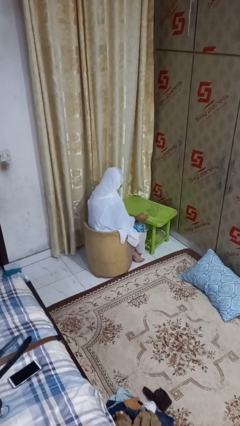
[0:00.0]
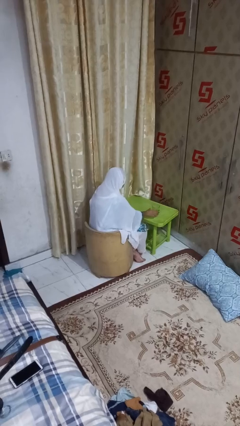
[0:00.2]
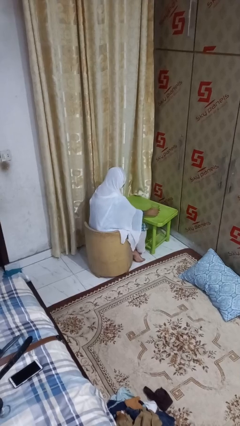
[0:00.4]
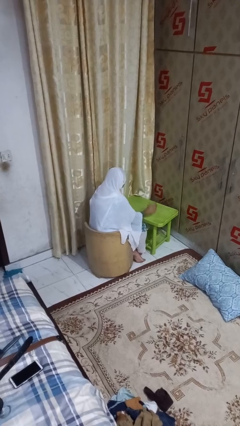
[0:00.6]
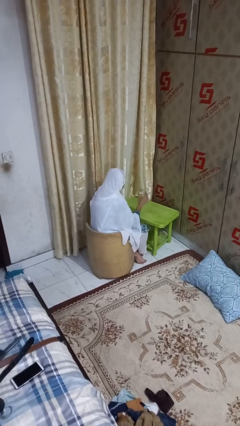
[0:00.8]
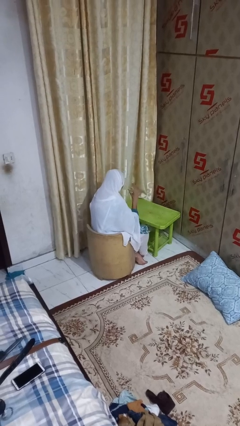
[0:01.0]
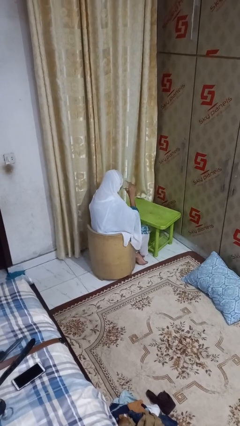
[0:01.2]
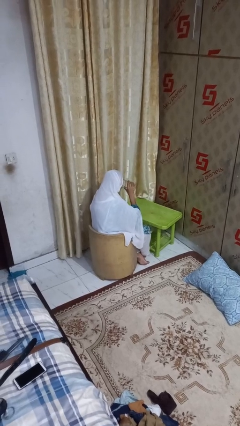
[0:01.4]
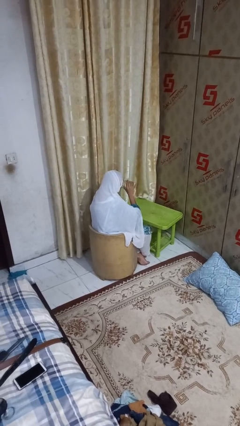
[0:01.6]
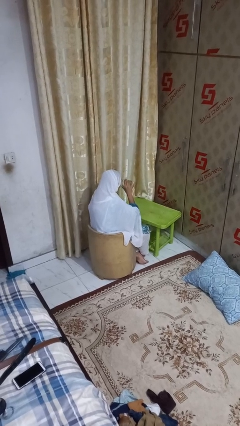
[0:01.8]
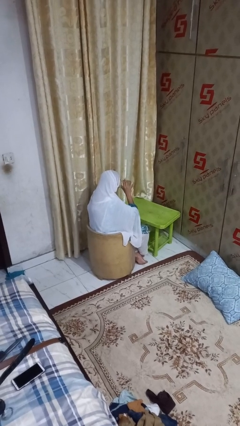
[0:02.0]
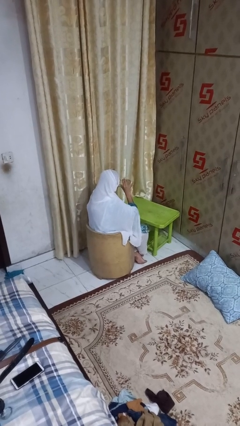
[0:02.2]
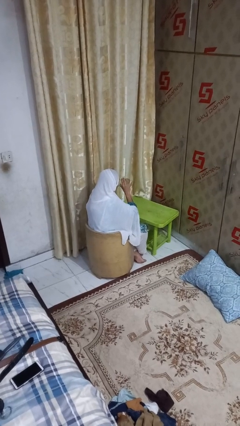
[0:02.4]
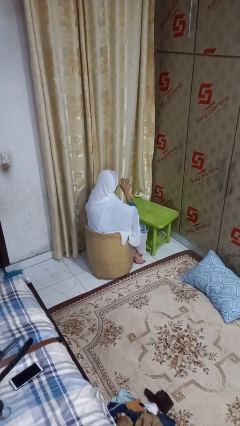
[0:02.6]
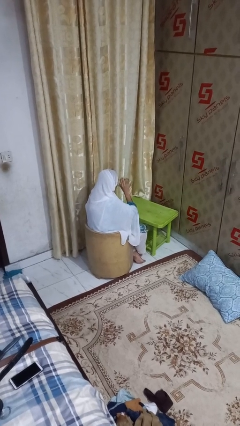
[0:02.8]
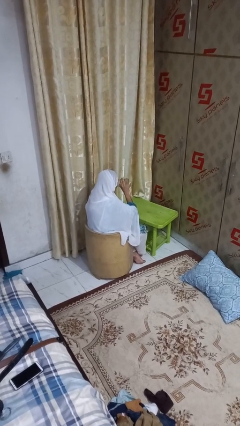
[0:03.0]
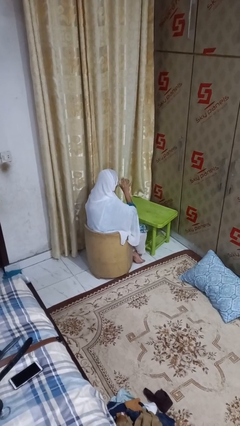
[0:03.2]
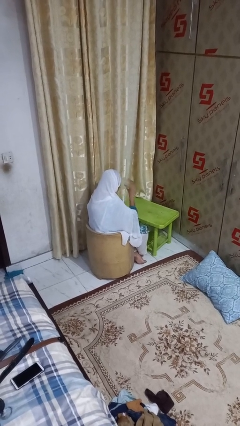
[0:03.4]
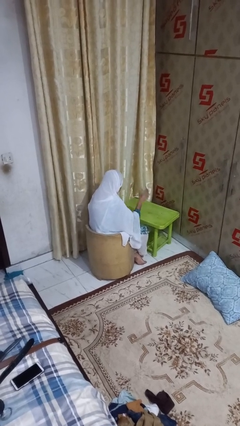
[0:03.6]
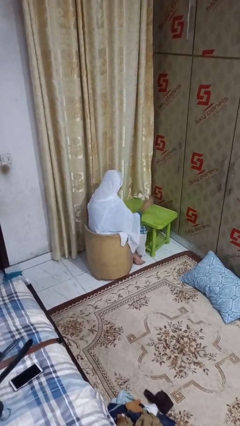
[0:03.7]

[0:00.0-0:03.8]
person drinks from cup

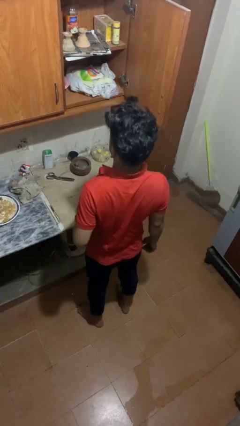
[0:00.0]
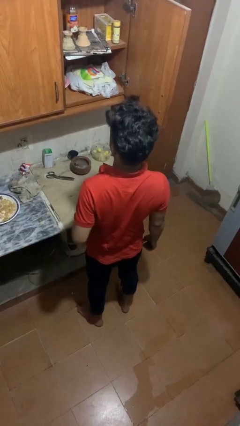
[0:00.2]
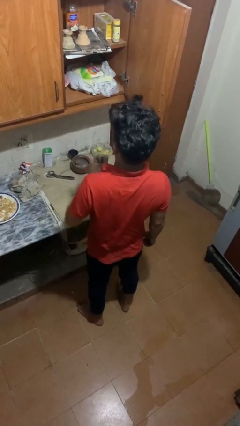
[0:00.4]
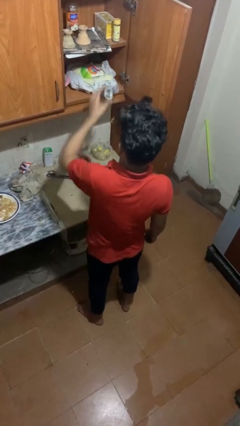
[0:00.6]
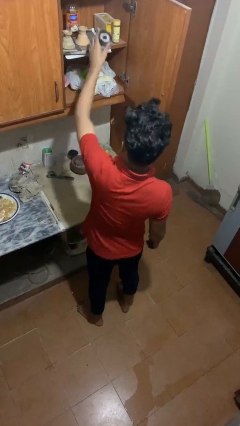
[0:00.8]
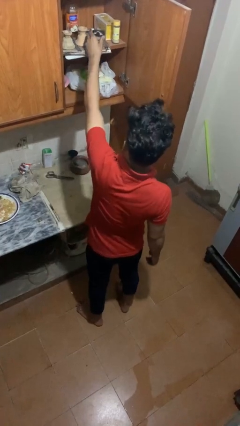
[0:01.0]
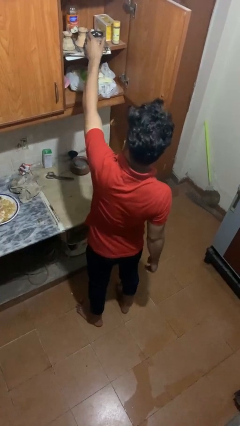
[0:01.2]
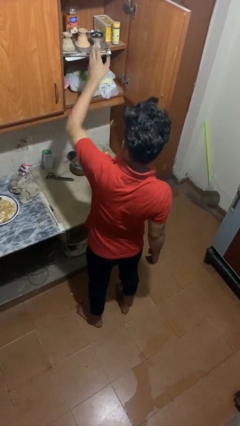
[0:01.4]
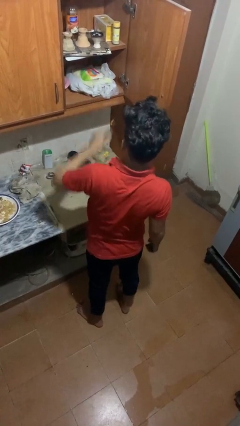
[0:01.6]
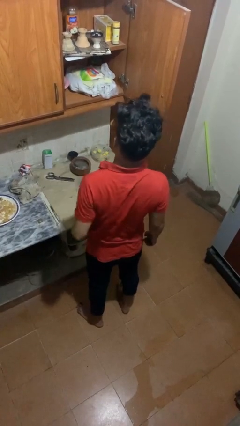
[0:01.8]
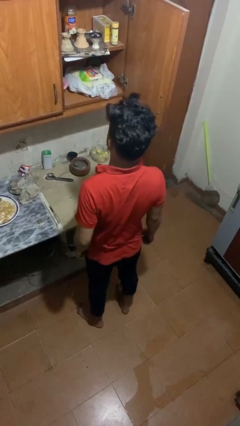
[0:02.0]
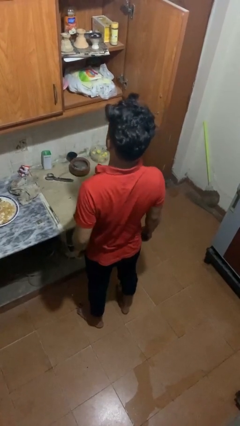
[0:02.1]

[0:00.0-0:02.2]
person puts object in cabinet

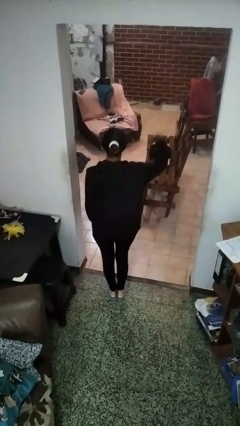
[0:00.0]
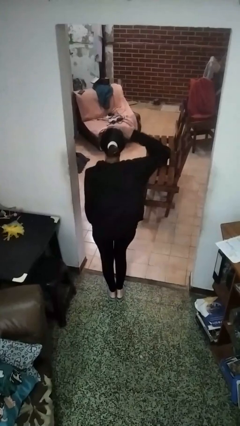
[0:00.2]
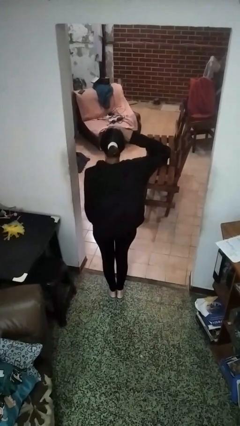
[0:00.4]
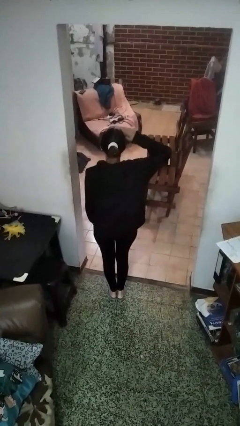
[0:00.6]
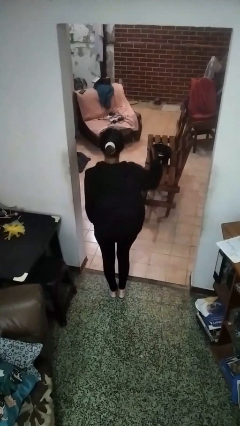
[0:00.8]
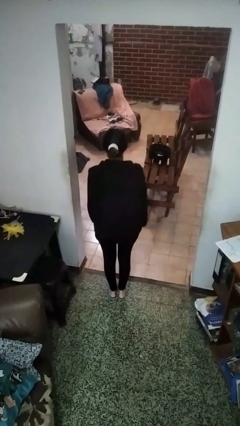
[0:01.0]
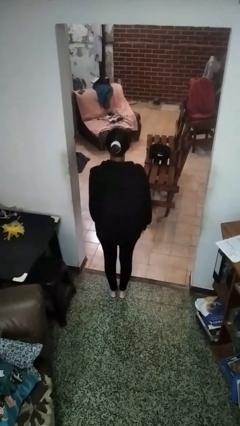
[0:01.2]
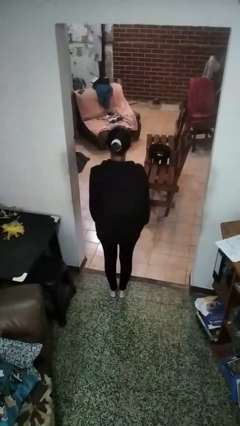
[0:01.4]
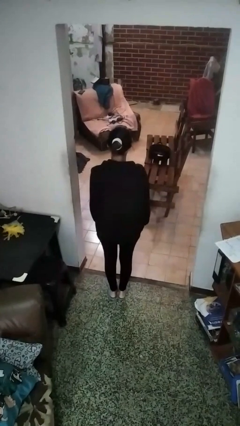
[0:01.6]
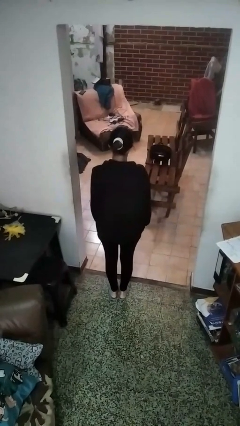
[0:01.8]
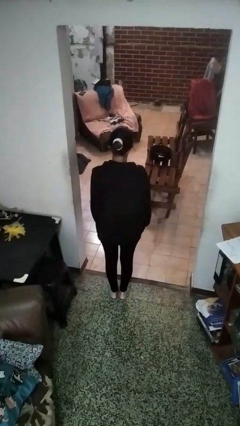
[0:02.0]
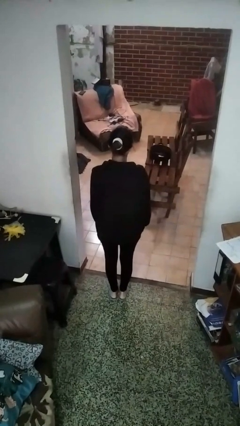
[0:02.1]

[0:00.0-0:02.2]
person salutes

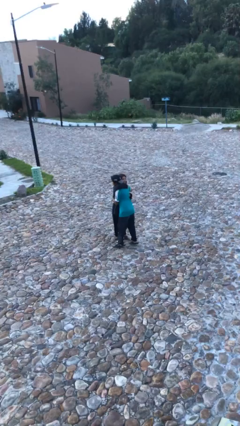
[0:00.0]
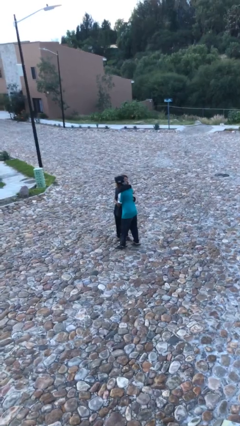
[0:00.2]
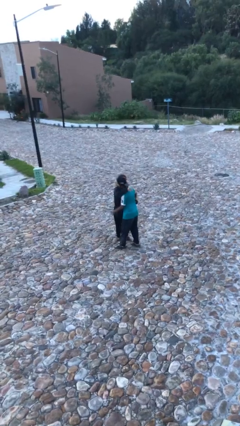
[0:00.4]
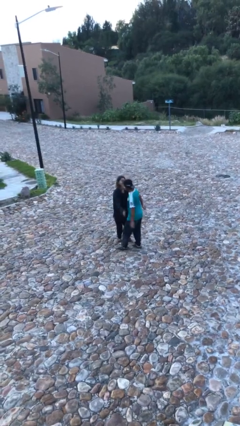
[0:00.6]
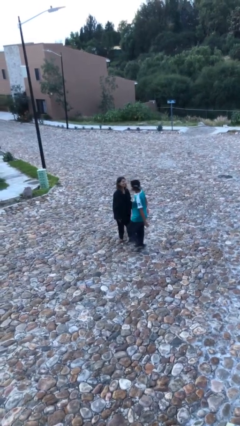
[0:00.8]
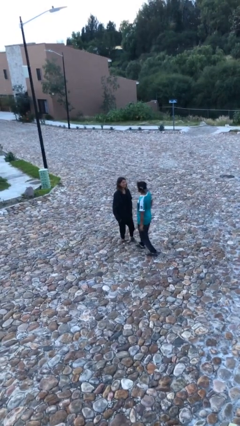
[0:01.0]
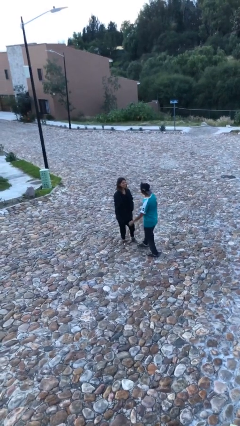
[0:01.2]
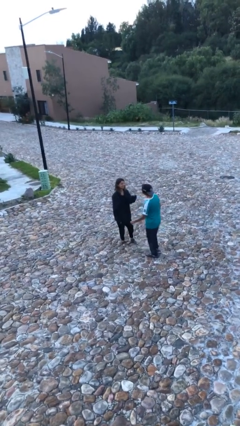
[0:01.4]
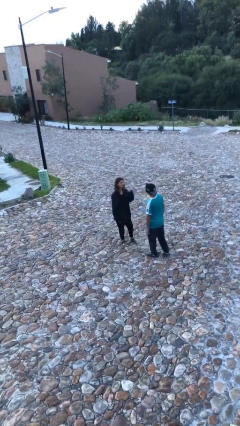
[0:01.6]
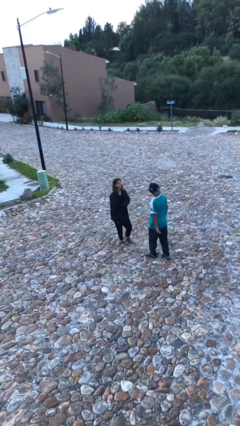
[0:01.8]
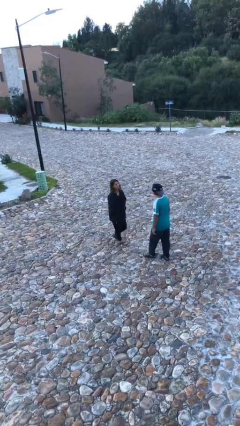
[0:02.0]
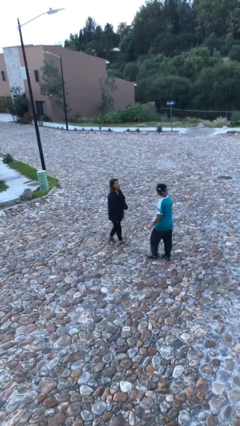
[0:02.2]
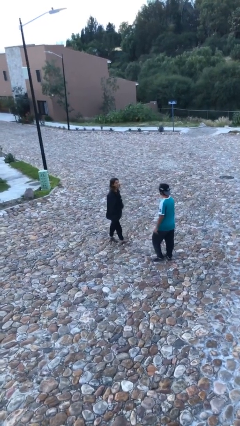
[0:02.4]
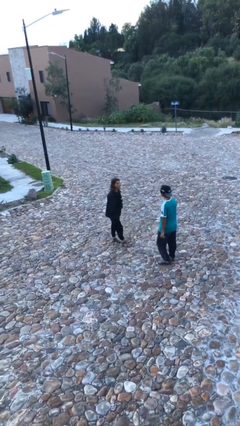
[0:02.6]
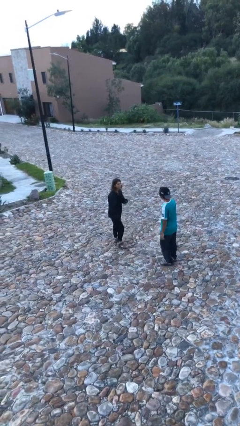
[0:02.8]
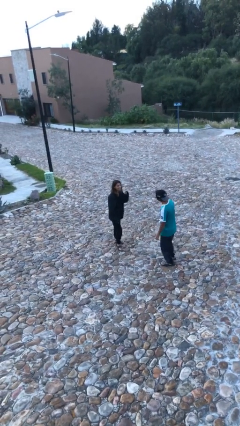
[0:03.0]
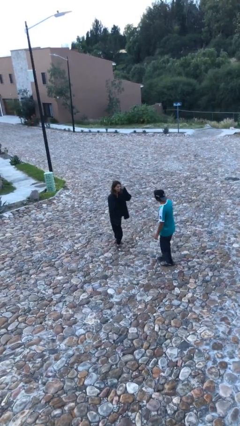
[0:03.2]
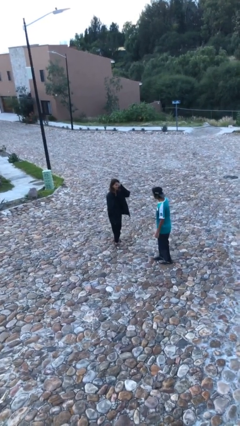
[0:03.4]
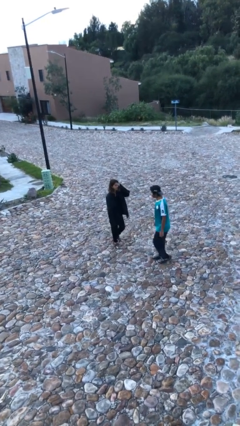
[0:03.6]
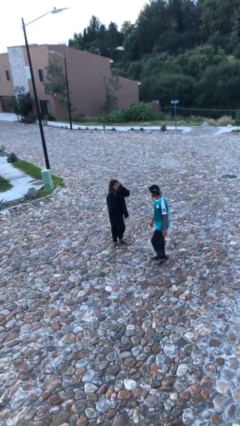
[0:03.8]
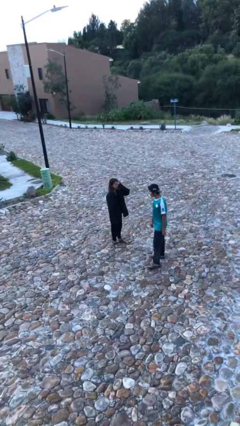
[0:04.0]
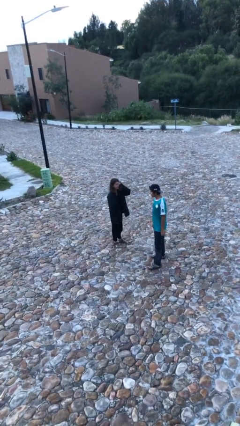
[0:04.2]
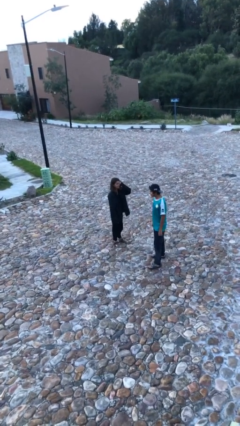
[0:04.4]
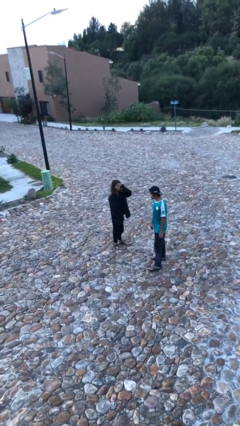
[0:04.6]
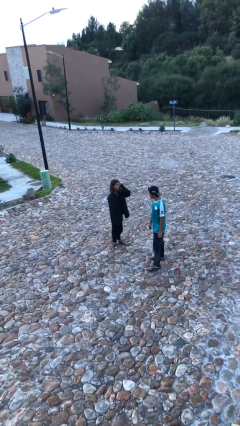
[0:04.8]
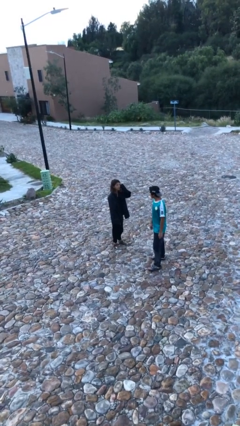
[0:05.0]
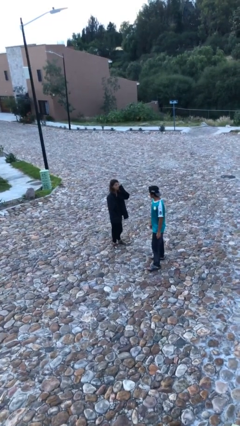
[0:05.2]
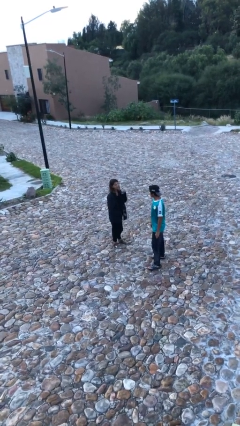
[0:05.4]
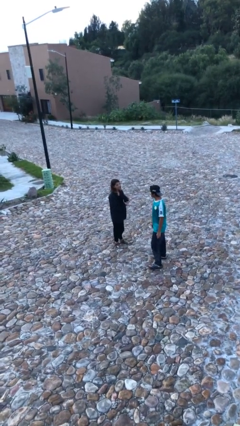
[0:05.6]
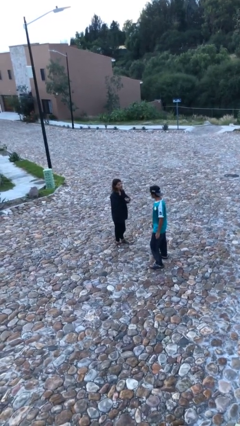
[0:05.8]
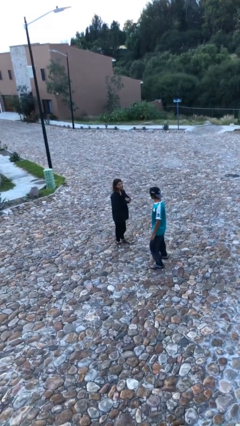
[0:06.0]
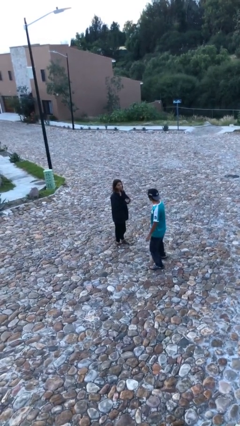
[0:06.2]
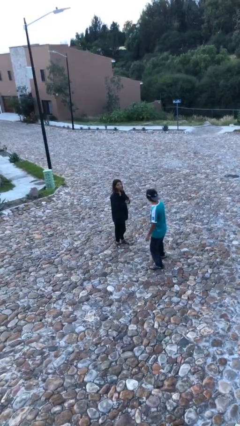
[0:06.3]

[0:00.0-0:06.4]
person talks to person

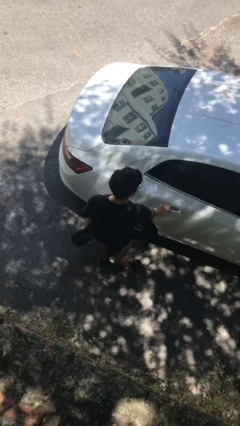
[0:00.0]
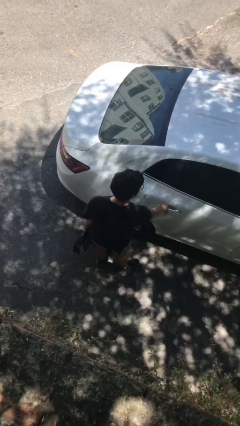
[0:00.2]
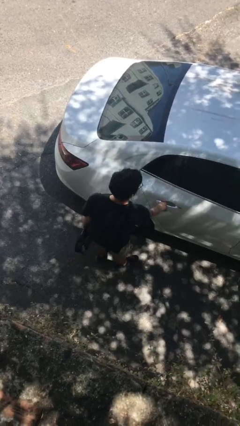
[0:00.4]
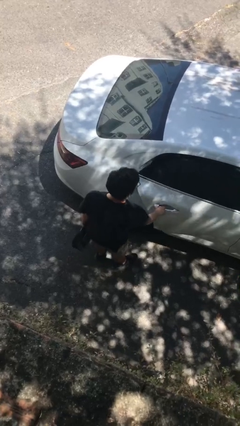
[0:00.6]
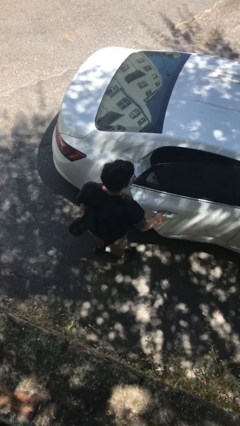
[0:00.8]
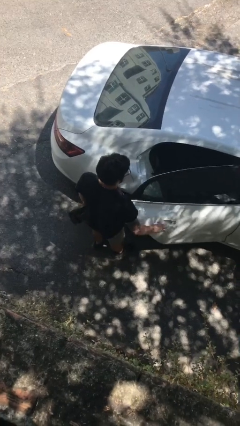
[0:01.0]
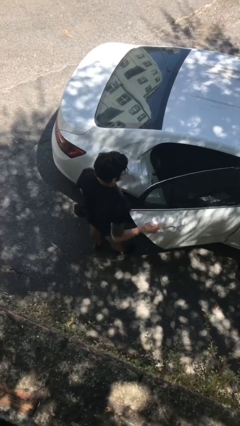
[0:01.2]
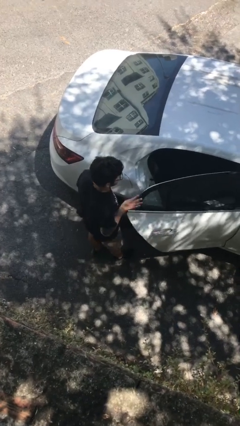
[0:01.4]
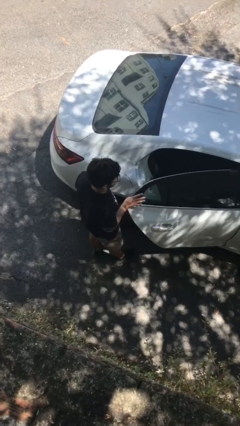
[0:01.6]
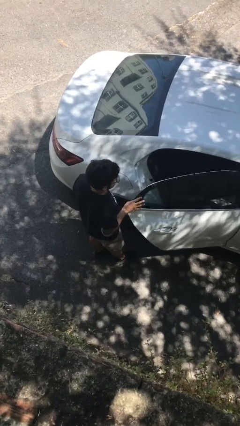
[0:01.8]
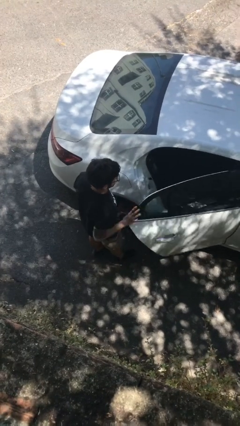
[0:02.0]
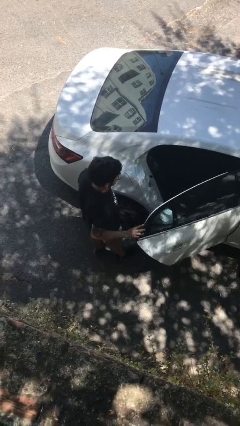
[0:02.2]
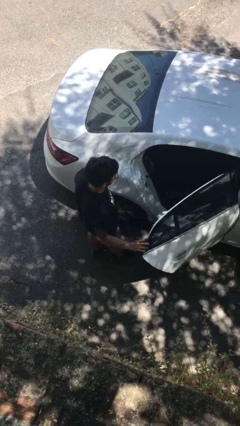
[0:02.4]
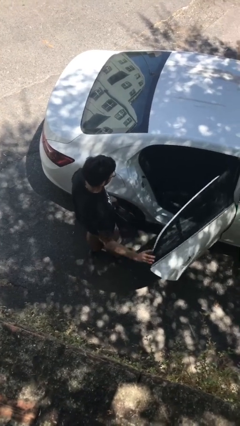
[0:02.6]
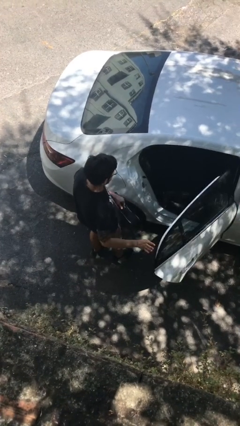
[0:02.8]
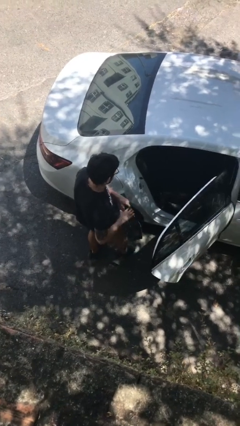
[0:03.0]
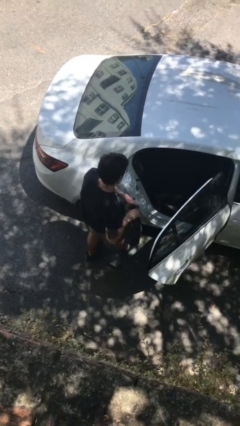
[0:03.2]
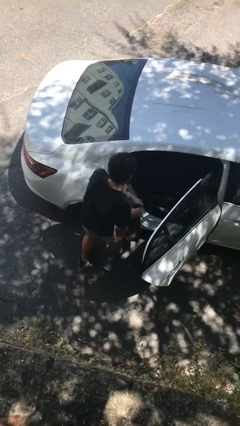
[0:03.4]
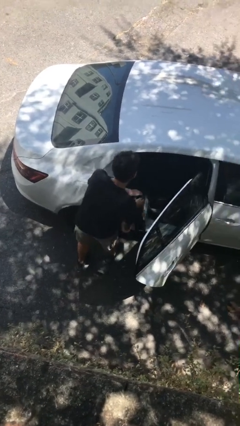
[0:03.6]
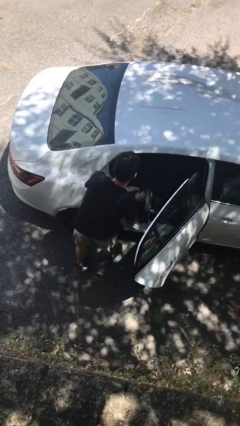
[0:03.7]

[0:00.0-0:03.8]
person opens car door
